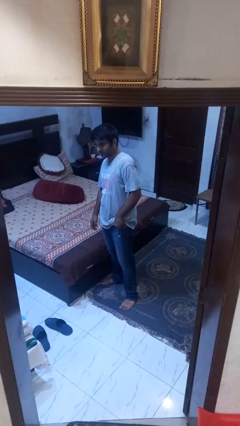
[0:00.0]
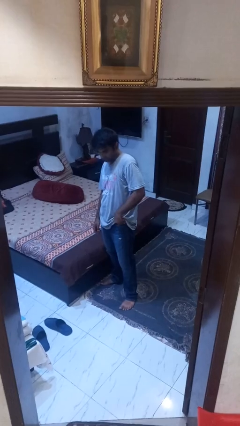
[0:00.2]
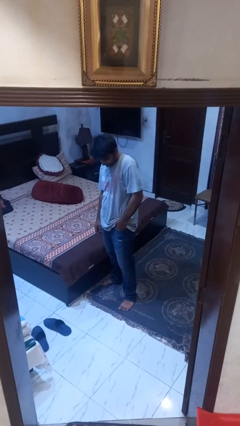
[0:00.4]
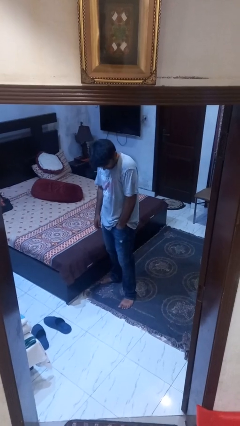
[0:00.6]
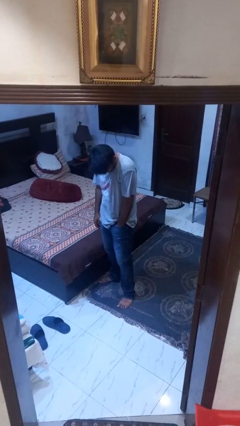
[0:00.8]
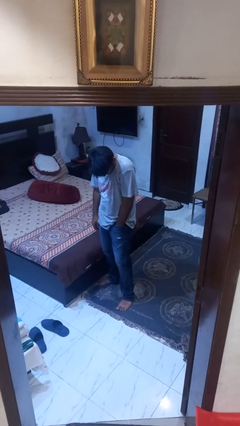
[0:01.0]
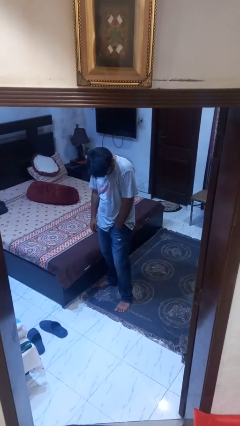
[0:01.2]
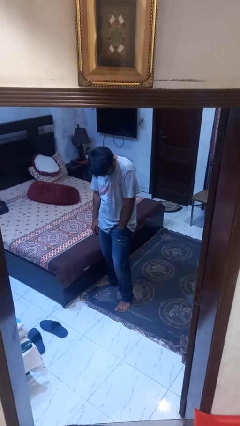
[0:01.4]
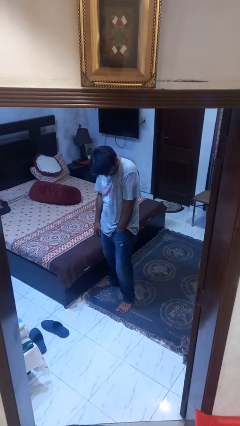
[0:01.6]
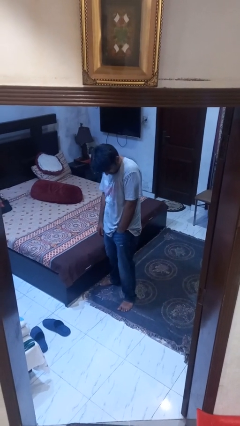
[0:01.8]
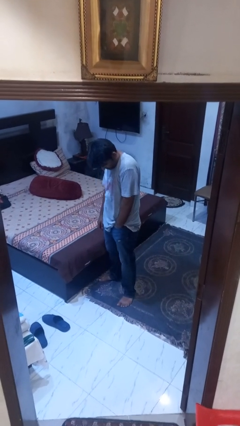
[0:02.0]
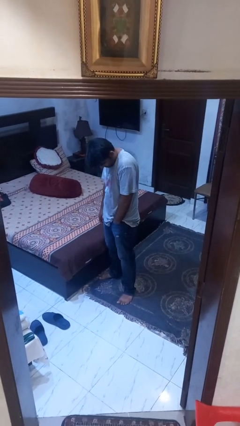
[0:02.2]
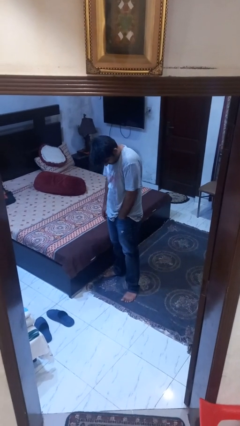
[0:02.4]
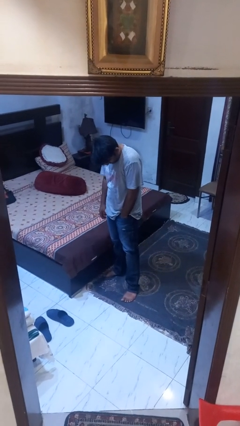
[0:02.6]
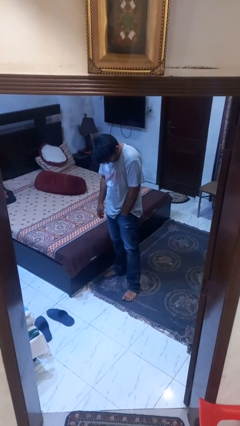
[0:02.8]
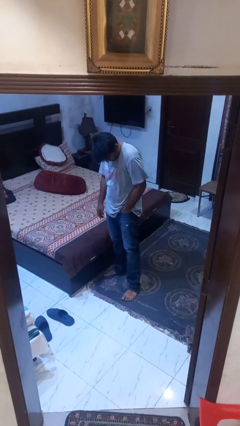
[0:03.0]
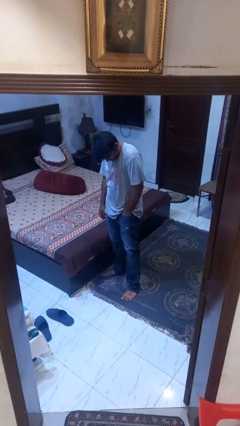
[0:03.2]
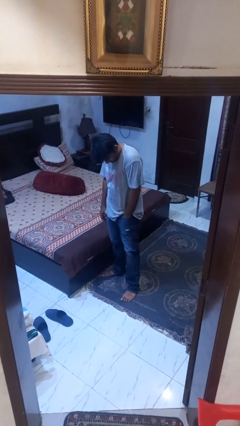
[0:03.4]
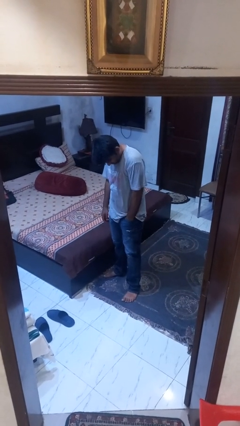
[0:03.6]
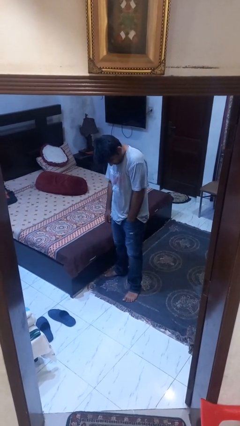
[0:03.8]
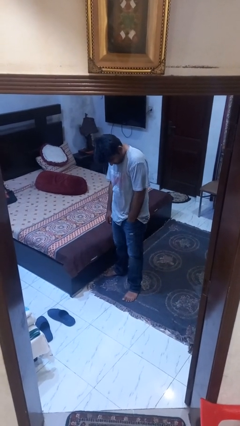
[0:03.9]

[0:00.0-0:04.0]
person puts hands in back pockets

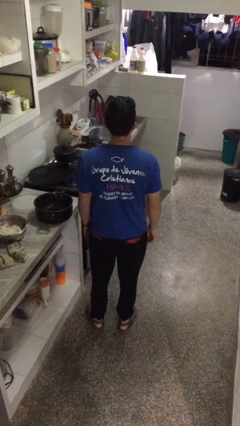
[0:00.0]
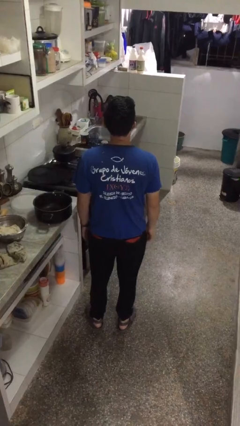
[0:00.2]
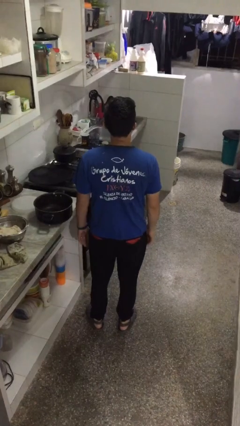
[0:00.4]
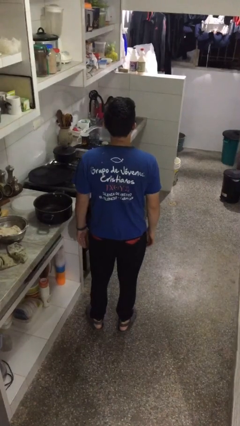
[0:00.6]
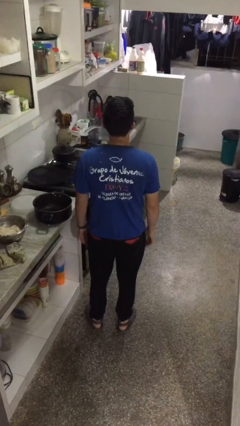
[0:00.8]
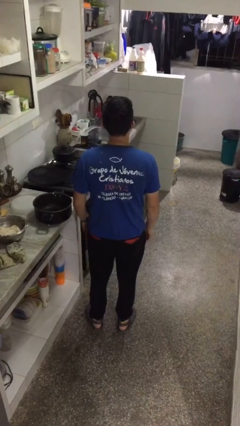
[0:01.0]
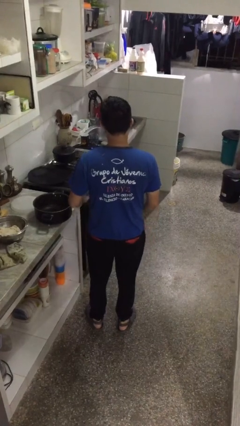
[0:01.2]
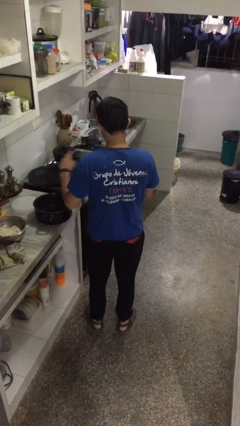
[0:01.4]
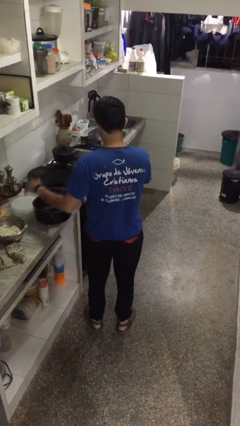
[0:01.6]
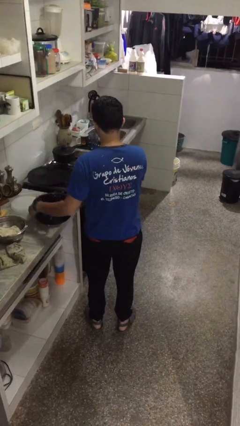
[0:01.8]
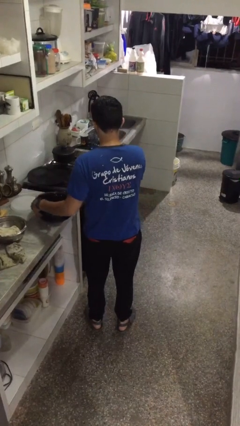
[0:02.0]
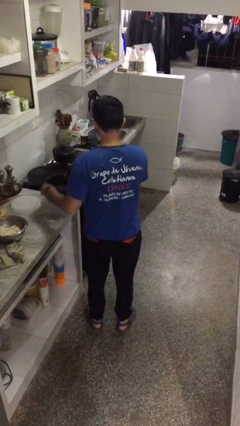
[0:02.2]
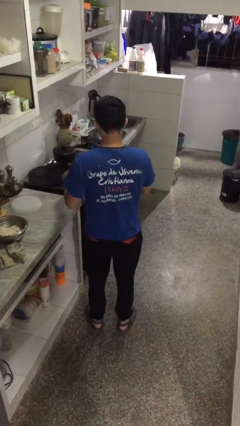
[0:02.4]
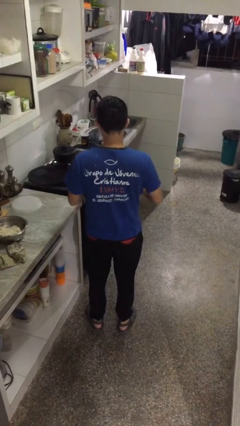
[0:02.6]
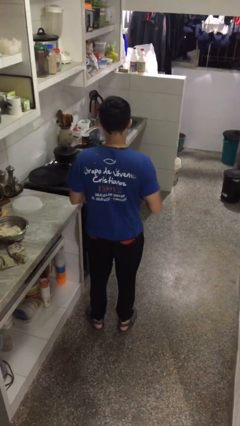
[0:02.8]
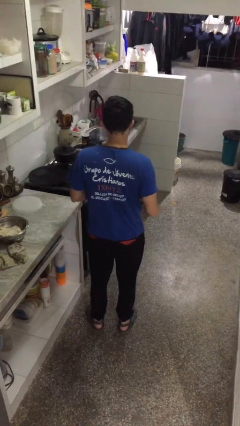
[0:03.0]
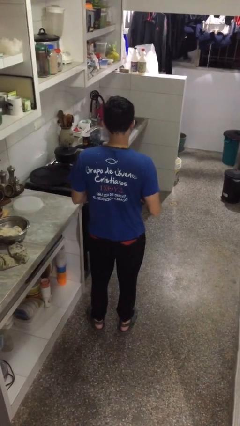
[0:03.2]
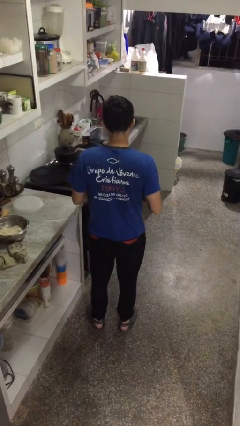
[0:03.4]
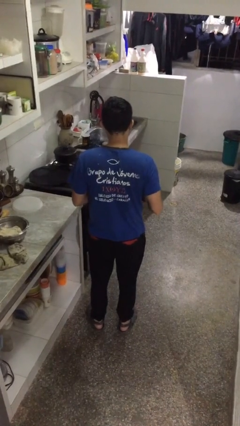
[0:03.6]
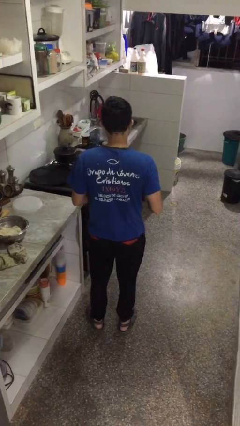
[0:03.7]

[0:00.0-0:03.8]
person picks up object from countertop

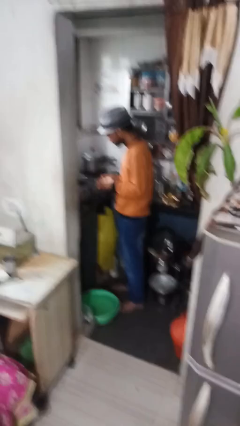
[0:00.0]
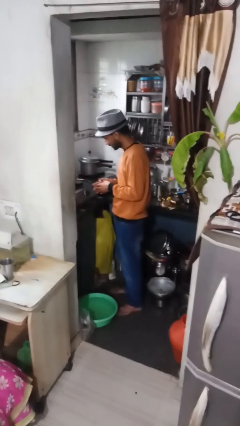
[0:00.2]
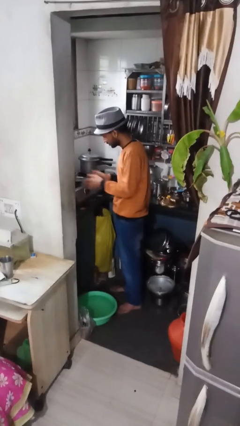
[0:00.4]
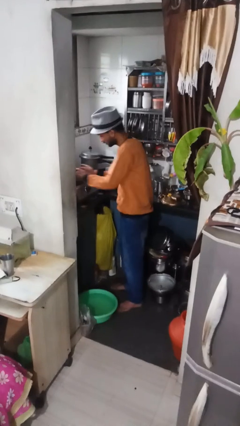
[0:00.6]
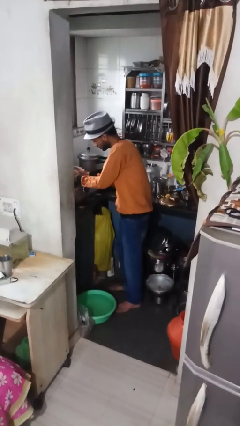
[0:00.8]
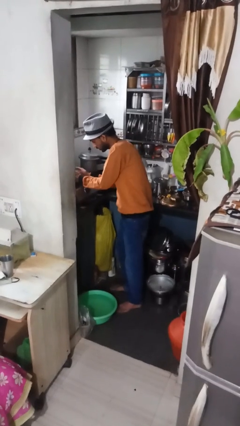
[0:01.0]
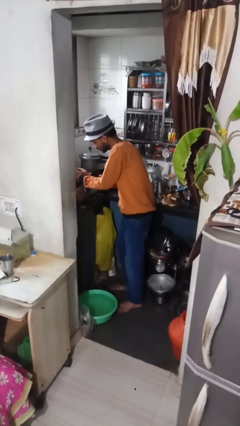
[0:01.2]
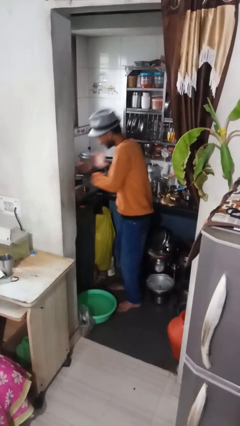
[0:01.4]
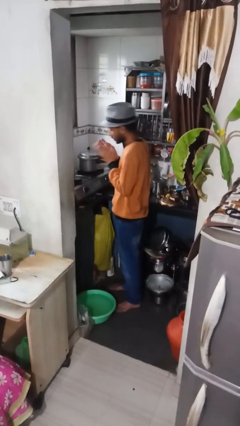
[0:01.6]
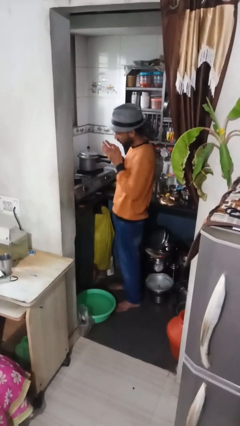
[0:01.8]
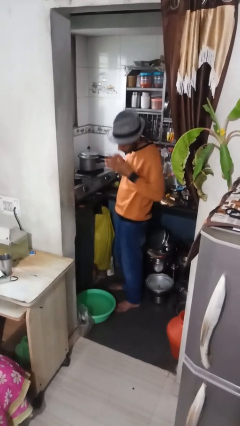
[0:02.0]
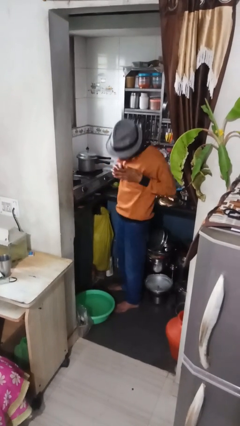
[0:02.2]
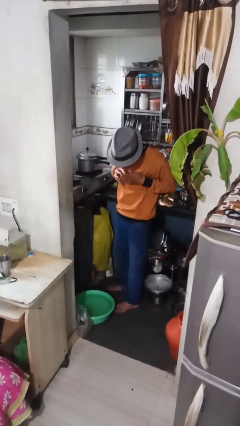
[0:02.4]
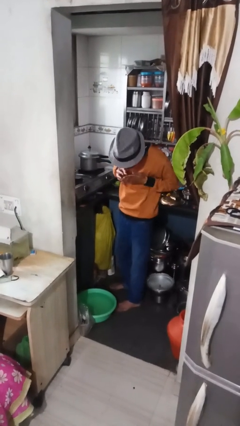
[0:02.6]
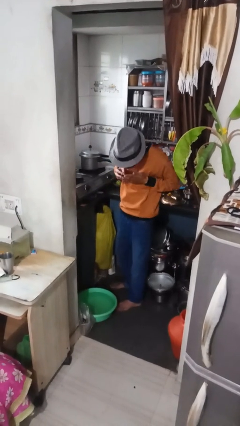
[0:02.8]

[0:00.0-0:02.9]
person burns hand

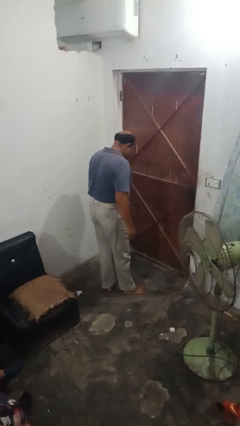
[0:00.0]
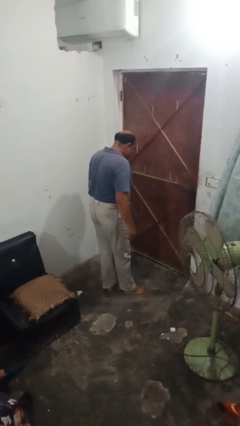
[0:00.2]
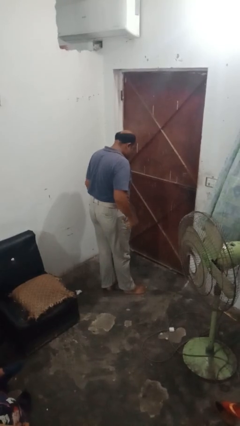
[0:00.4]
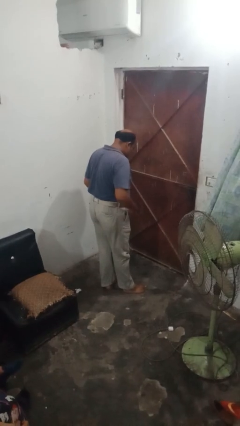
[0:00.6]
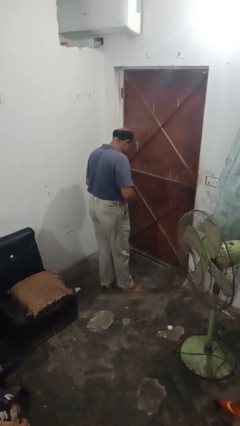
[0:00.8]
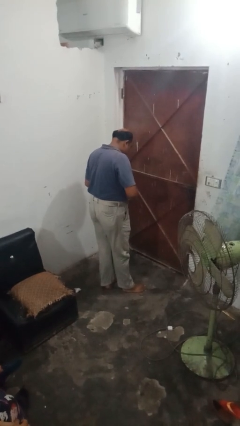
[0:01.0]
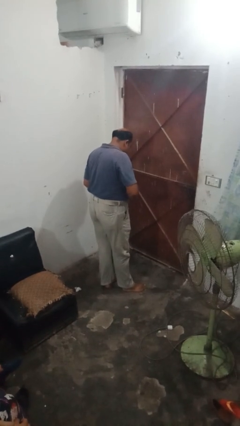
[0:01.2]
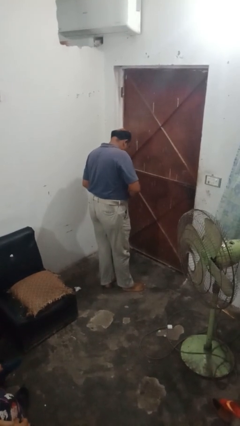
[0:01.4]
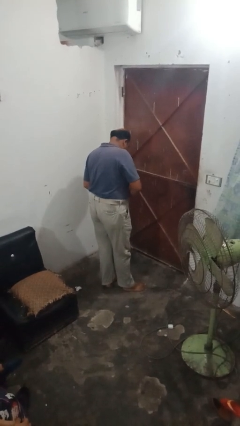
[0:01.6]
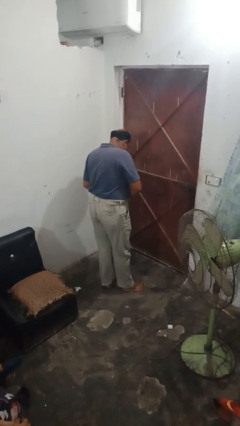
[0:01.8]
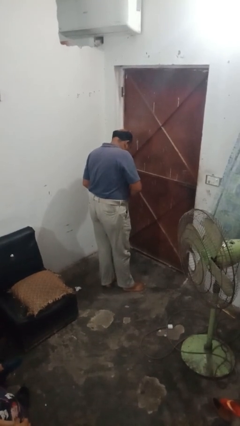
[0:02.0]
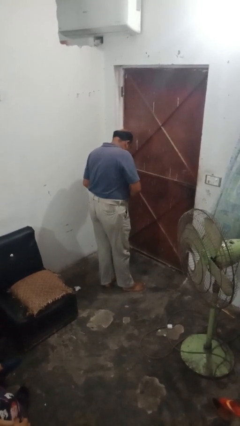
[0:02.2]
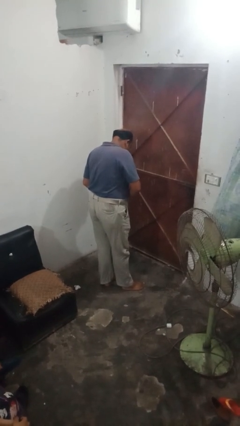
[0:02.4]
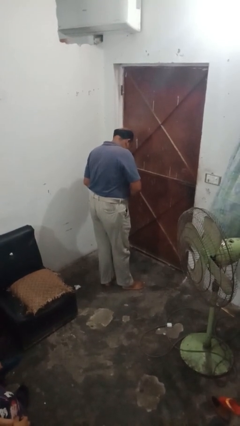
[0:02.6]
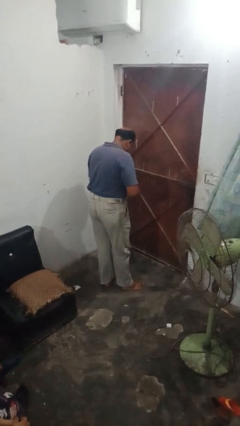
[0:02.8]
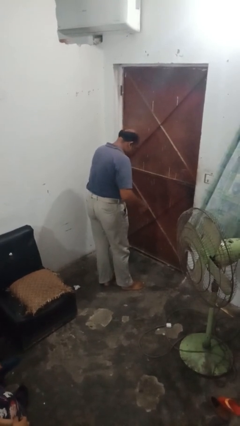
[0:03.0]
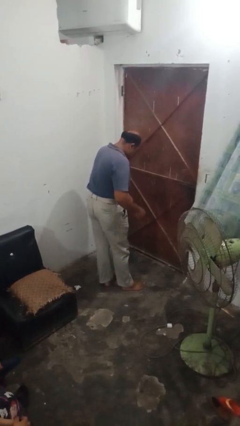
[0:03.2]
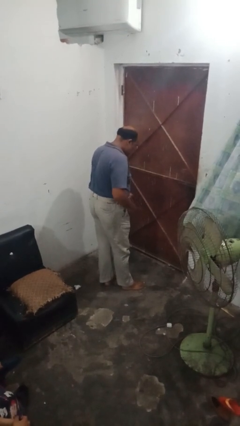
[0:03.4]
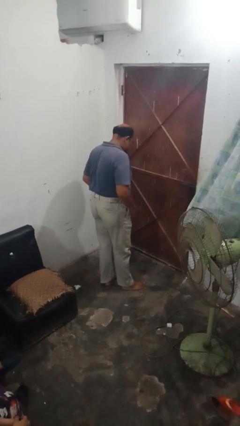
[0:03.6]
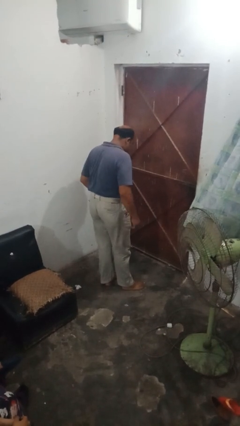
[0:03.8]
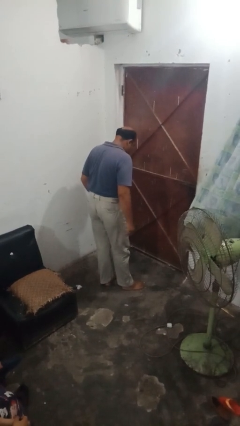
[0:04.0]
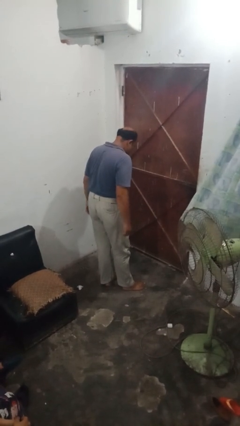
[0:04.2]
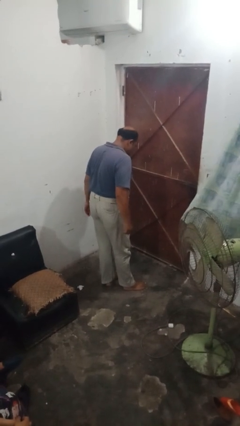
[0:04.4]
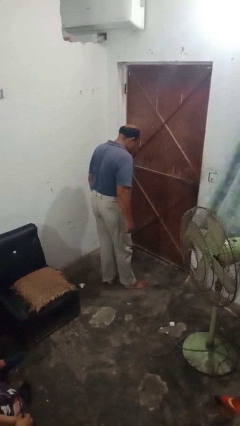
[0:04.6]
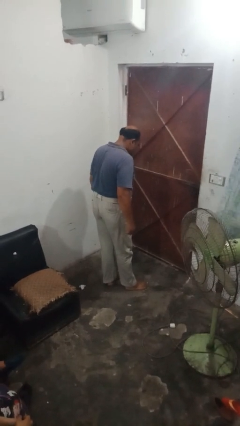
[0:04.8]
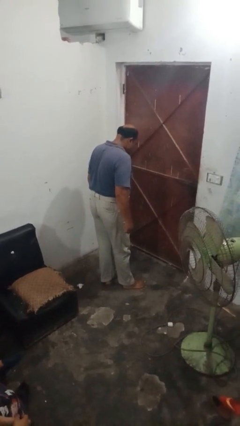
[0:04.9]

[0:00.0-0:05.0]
person puts on belt

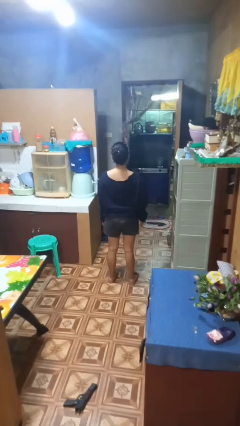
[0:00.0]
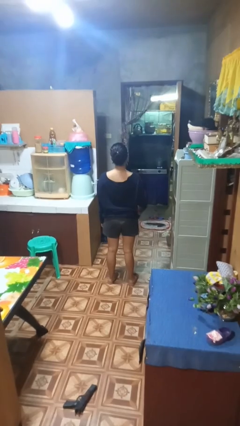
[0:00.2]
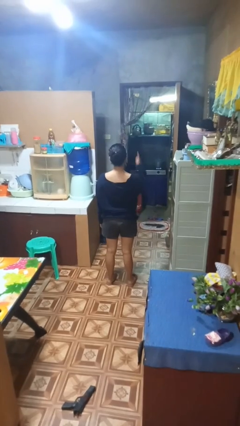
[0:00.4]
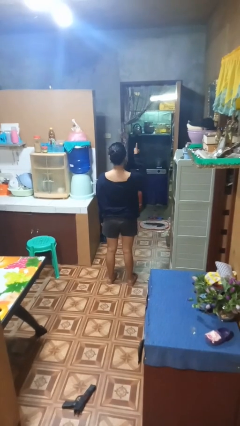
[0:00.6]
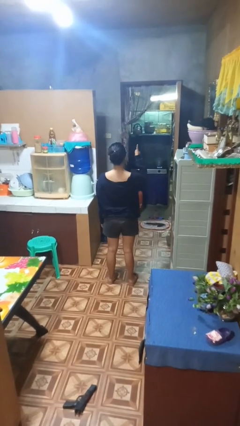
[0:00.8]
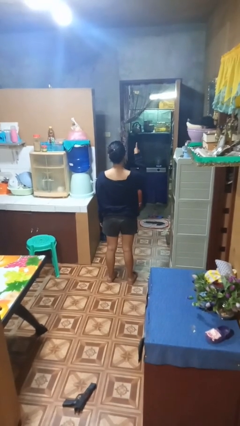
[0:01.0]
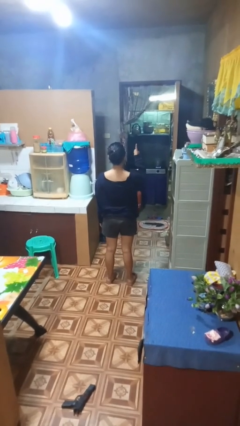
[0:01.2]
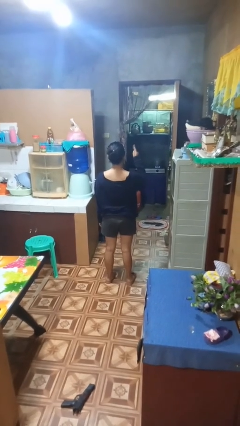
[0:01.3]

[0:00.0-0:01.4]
person gestures number one

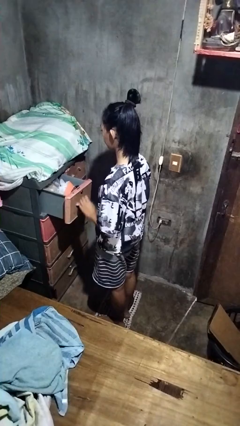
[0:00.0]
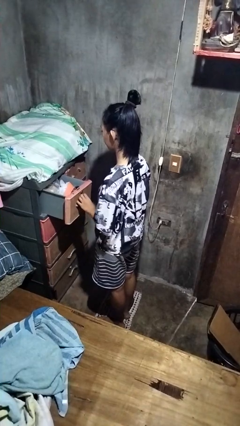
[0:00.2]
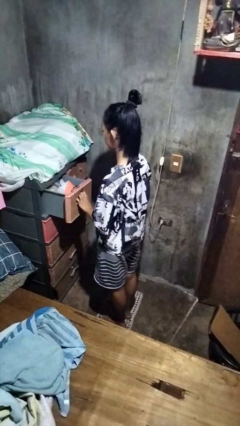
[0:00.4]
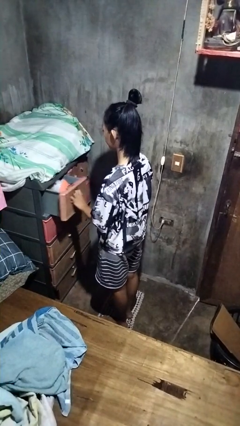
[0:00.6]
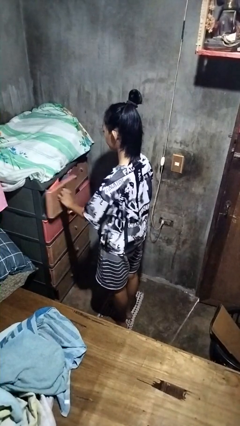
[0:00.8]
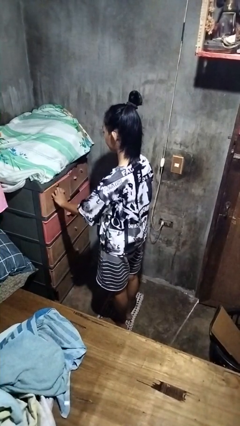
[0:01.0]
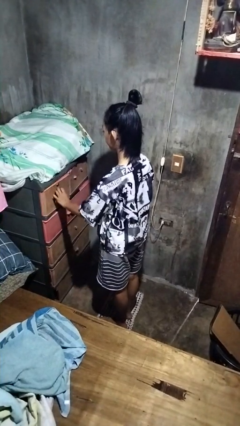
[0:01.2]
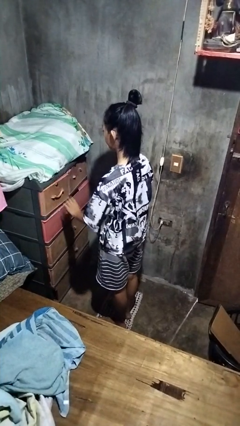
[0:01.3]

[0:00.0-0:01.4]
person closes dresser drawer
